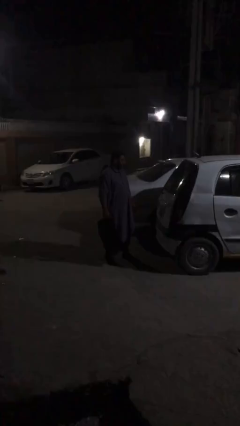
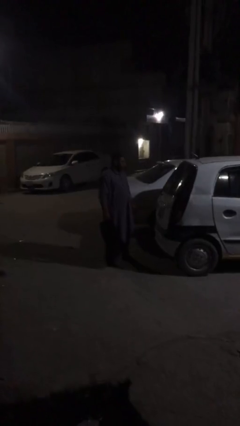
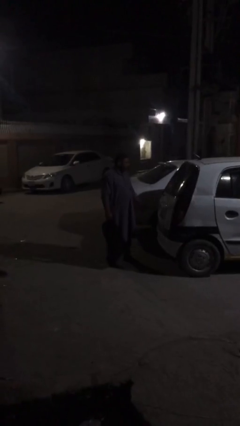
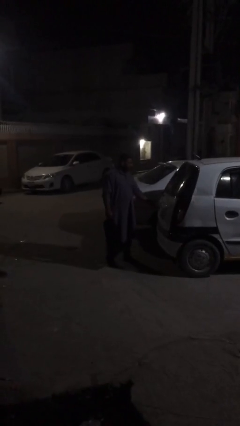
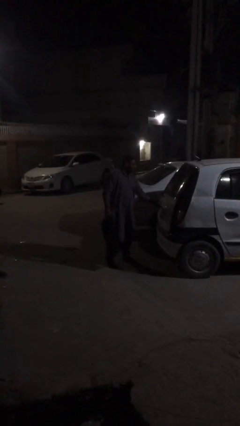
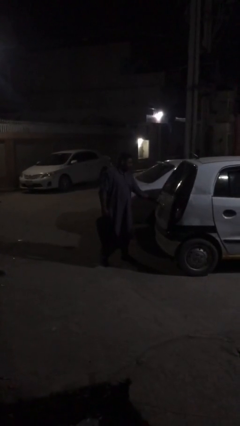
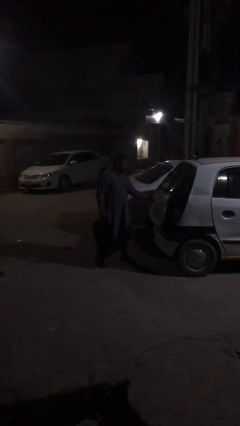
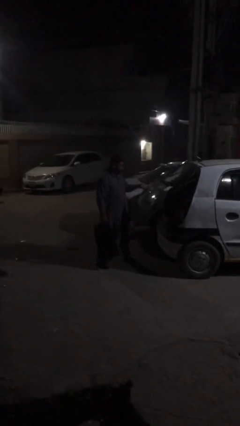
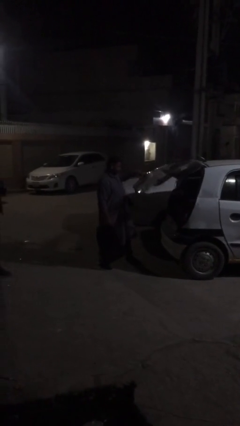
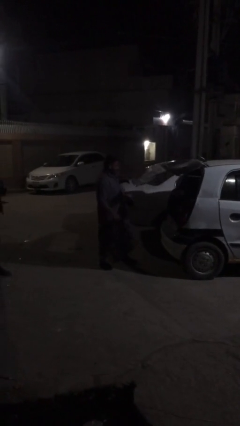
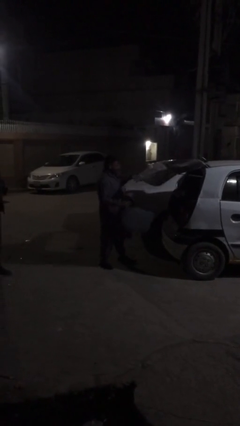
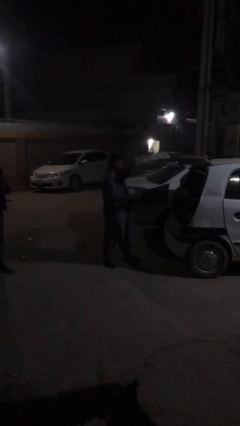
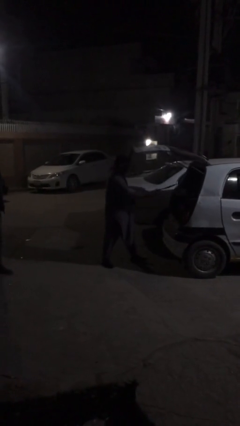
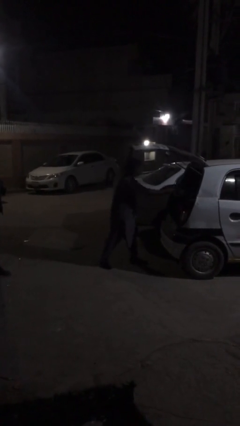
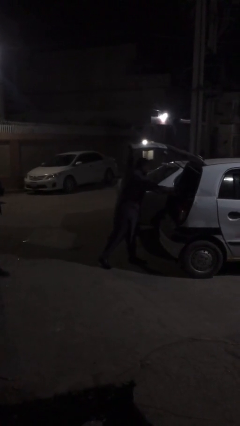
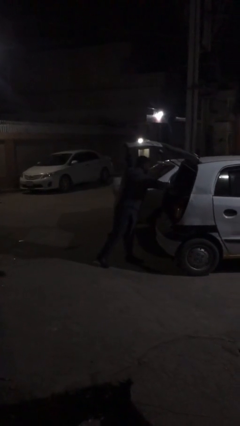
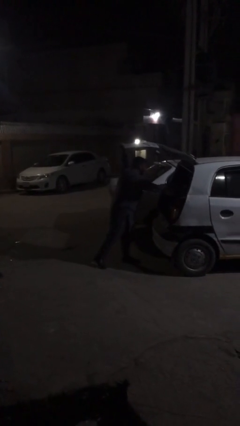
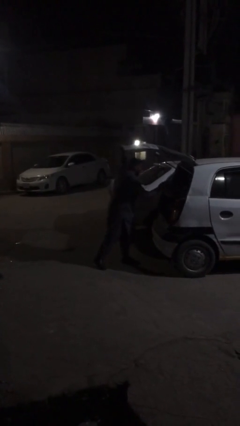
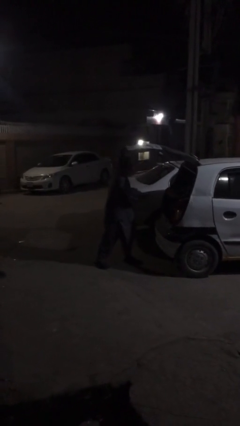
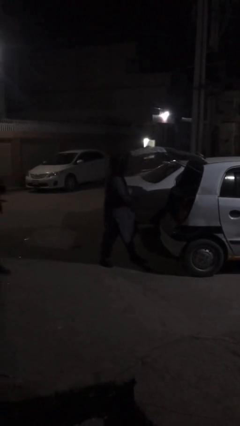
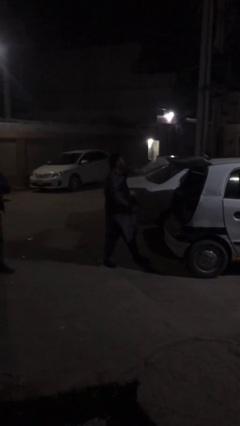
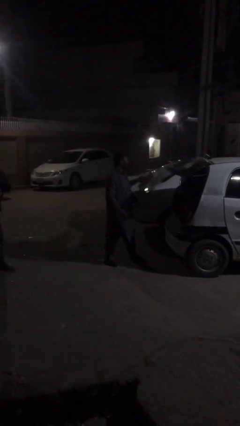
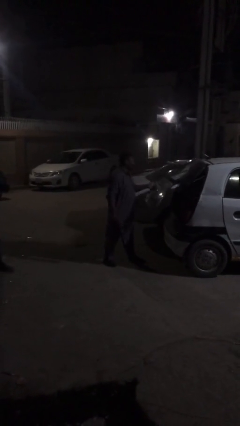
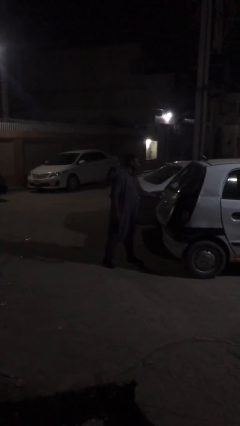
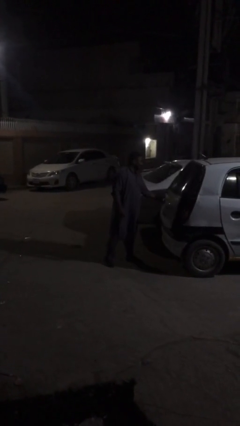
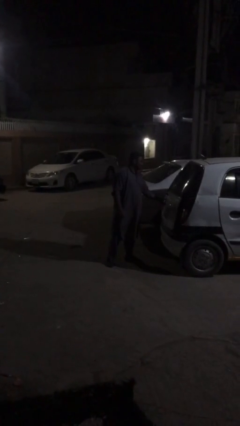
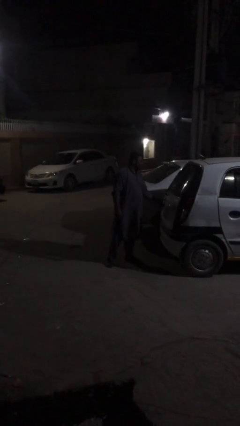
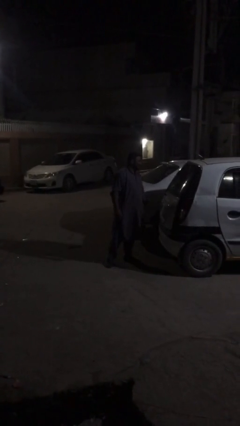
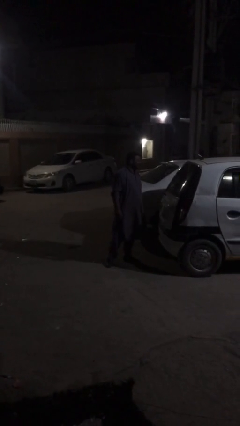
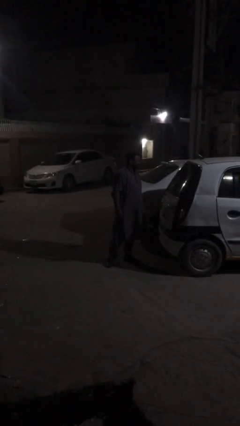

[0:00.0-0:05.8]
person loads car

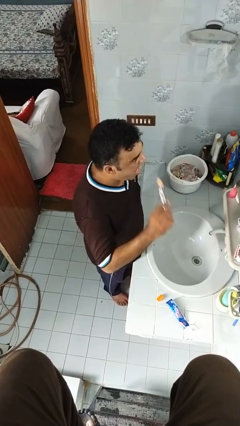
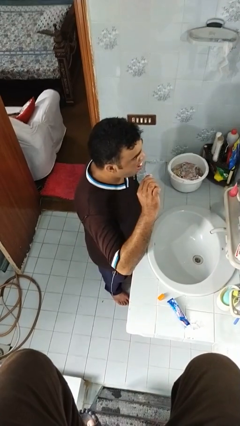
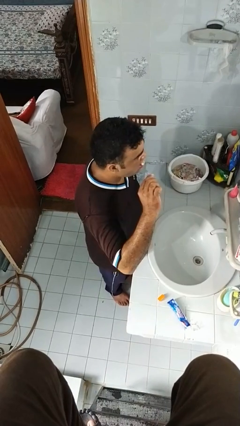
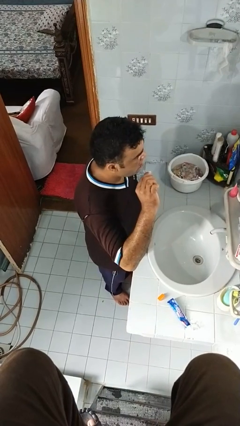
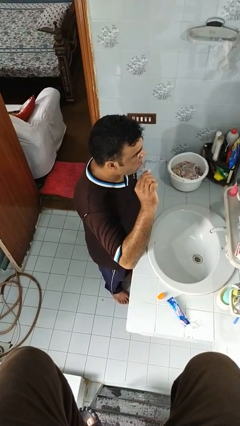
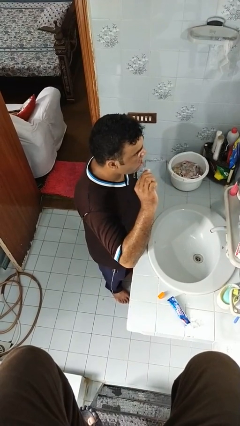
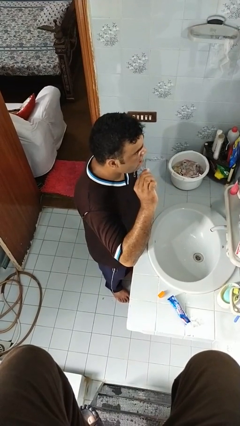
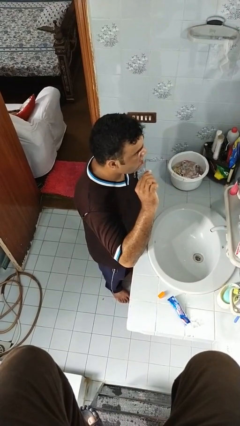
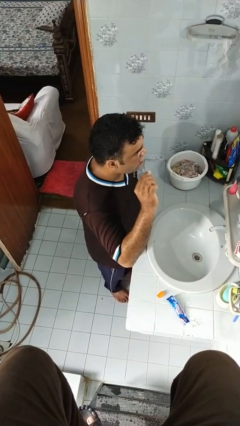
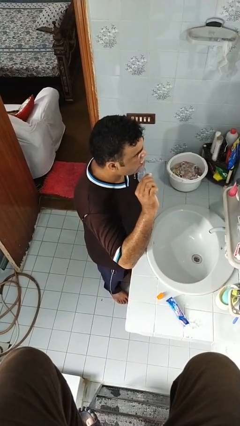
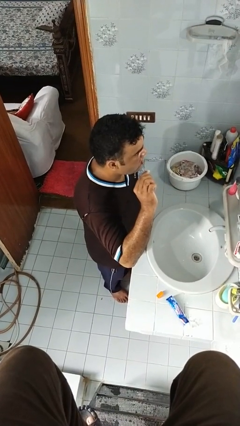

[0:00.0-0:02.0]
person brushes teeth

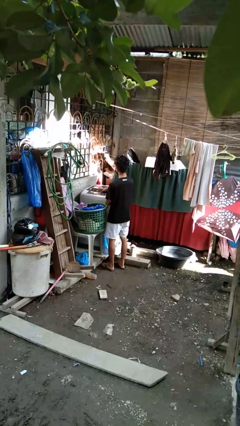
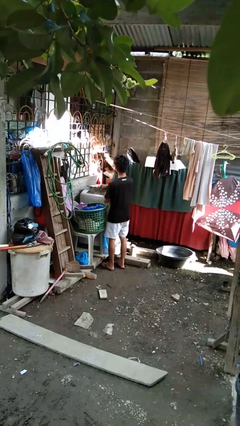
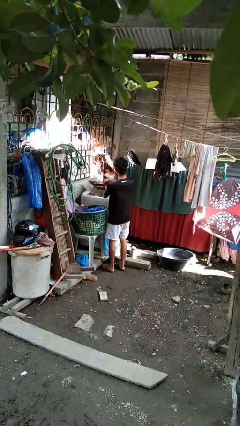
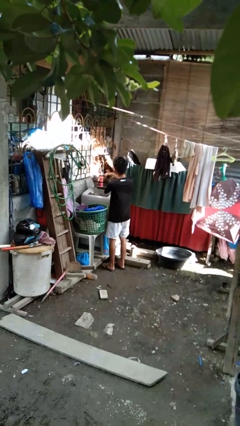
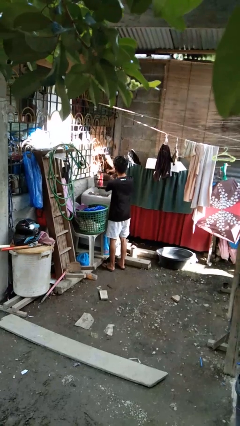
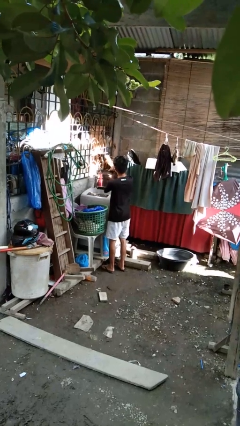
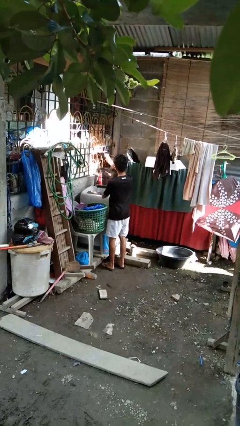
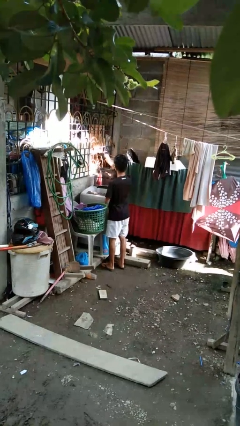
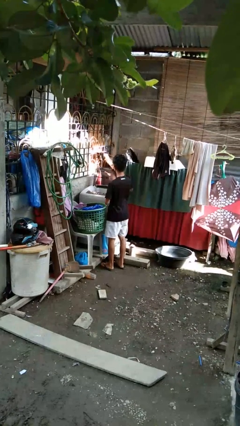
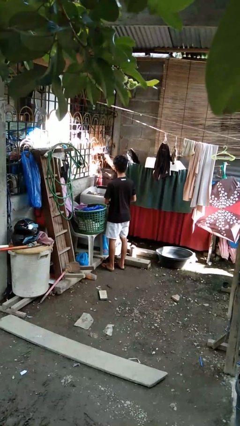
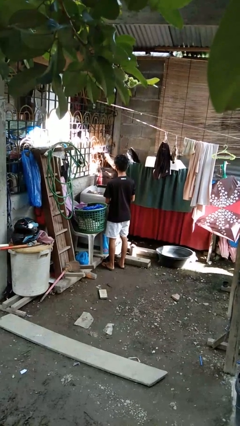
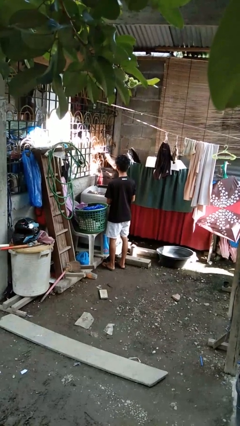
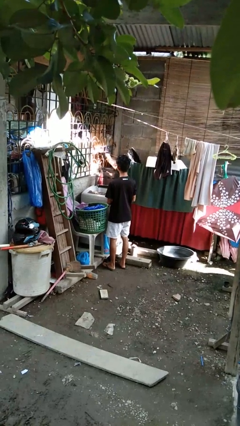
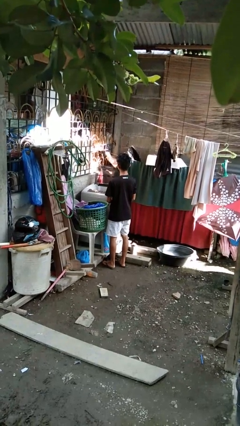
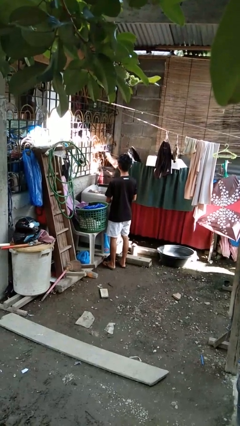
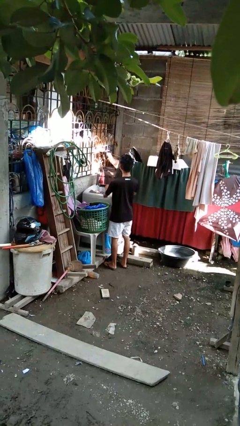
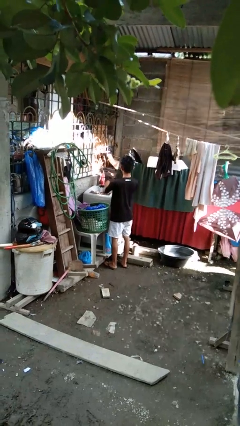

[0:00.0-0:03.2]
person opens clothes washer

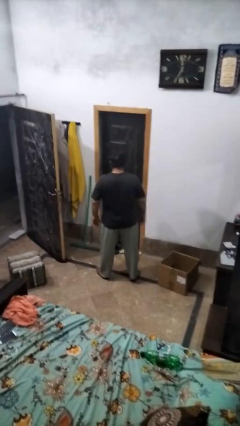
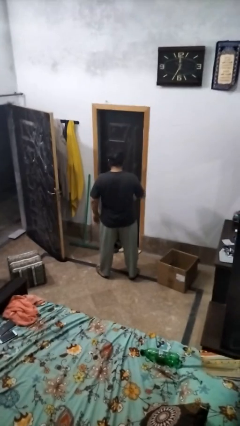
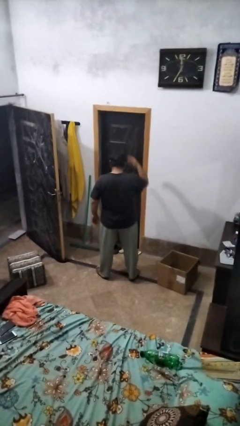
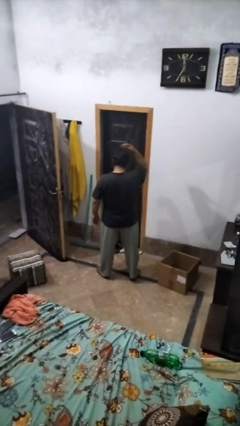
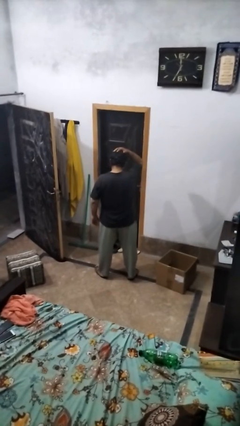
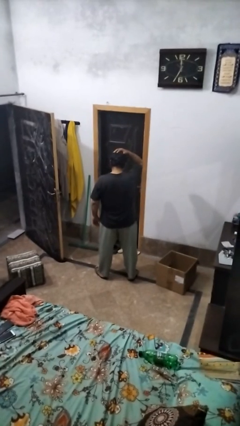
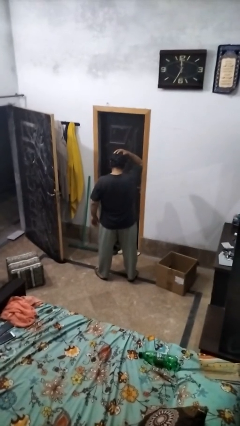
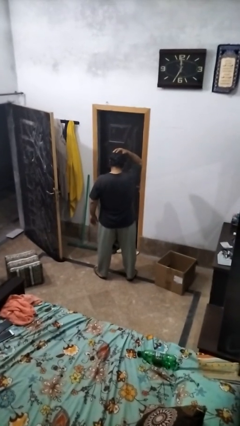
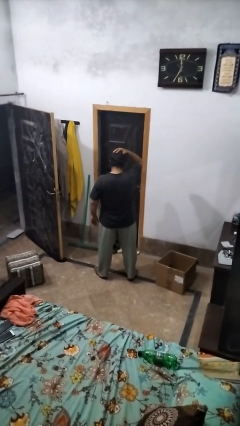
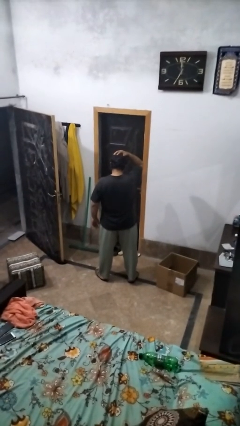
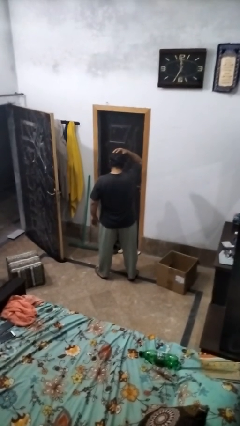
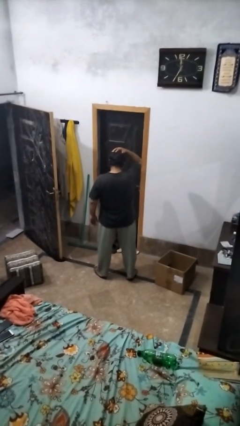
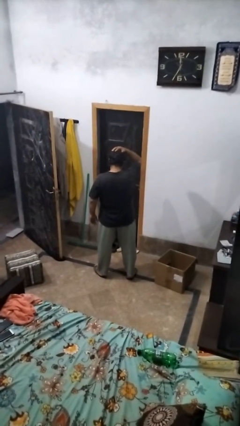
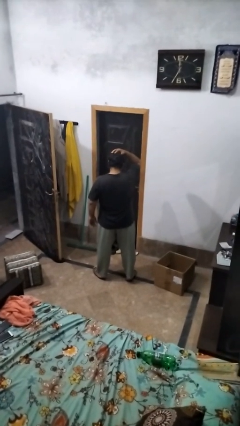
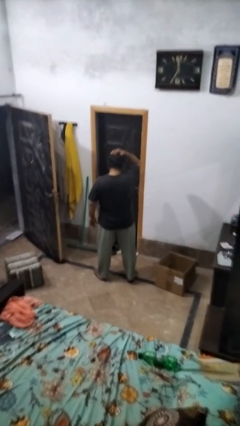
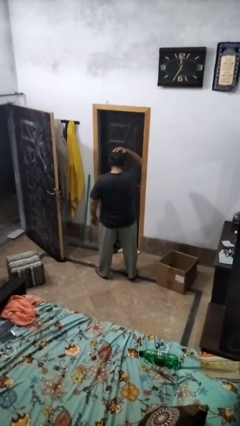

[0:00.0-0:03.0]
person pats head

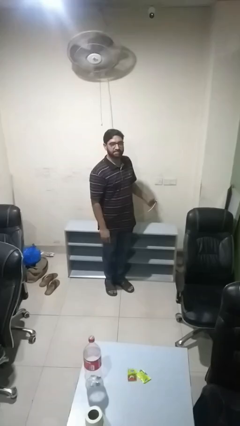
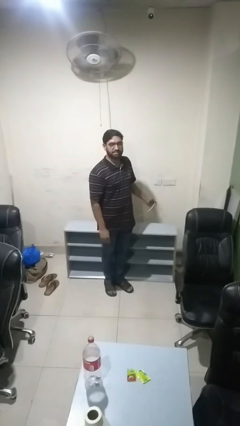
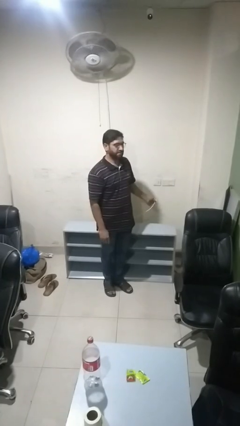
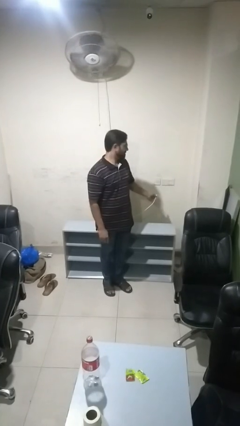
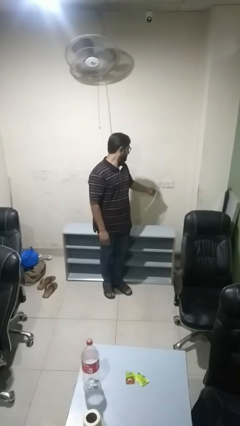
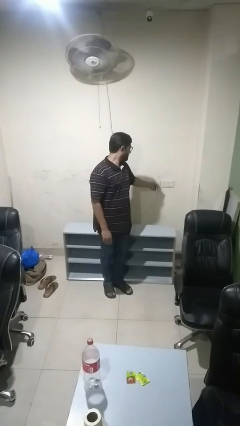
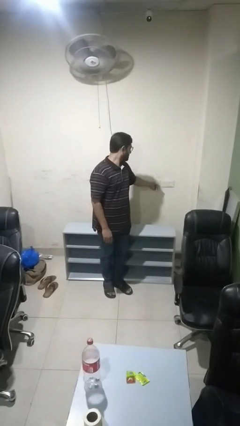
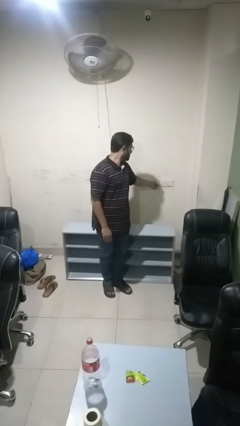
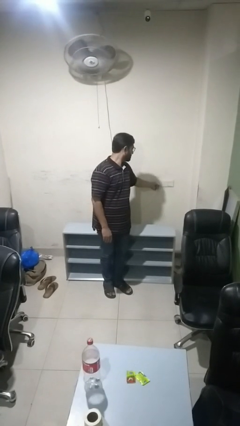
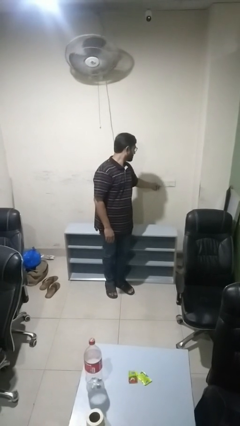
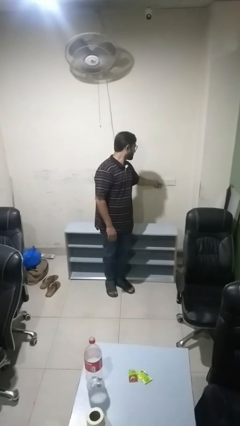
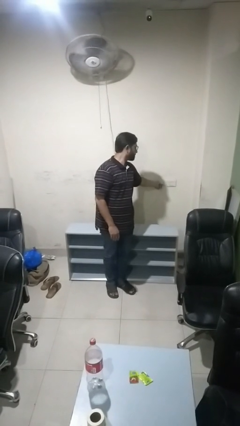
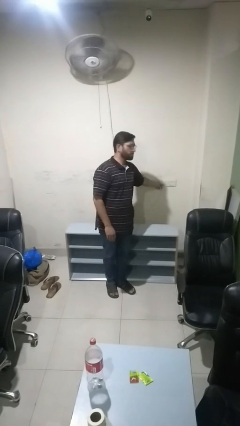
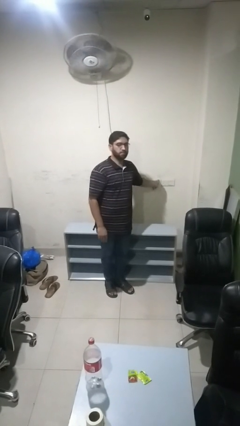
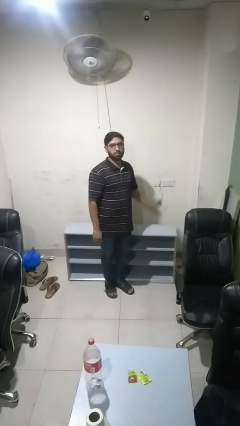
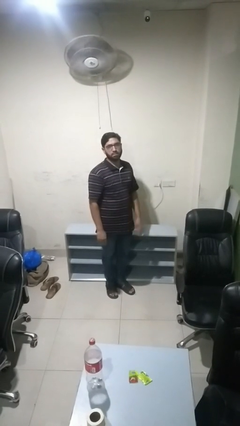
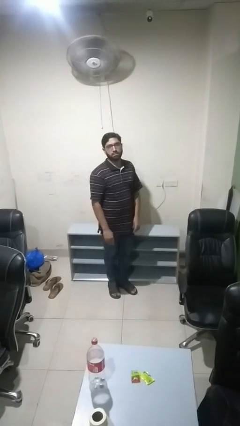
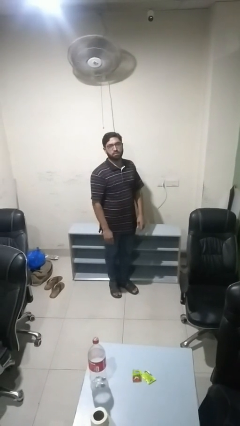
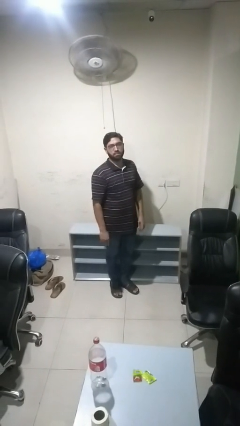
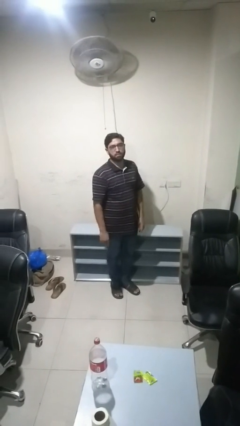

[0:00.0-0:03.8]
person plugs into electrical socket

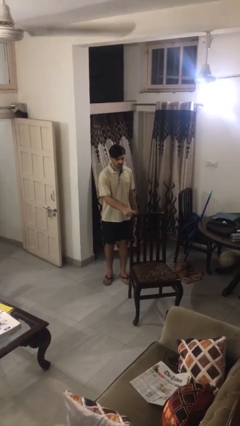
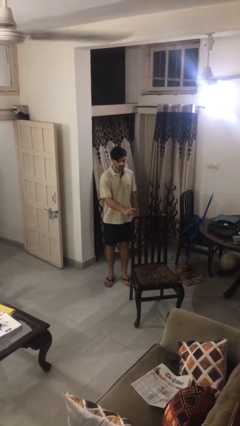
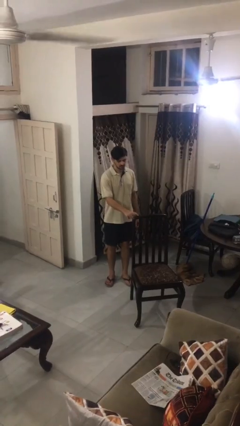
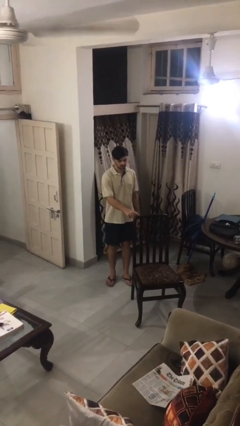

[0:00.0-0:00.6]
person taps object with finger
